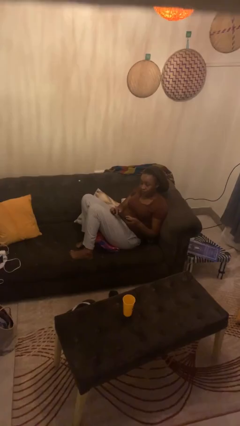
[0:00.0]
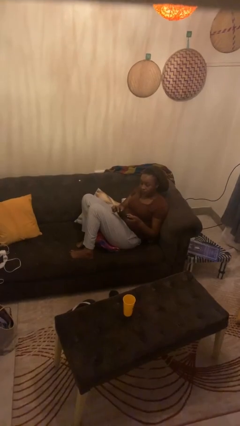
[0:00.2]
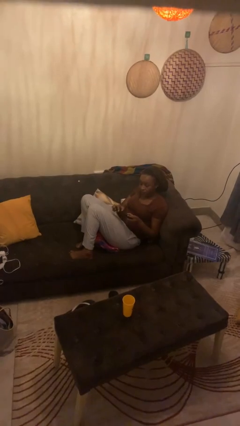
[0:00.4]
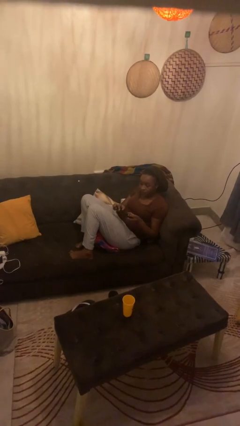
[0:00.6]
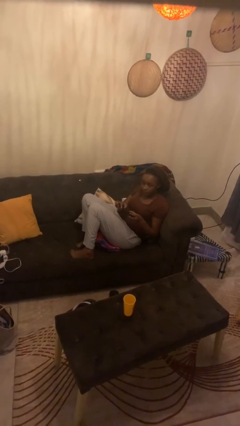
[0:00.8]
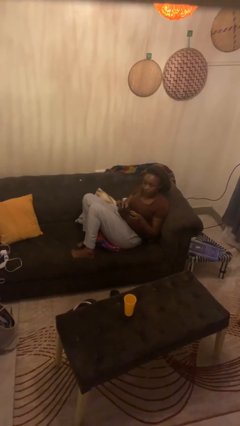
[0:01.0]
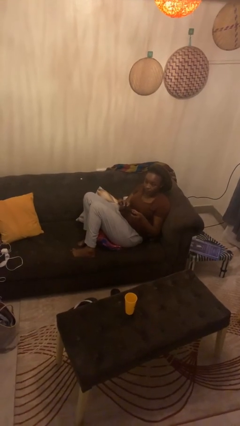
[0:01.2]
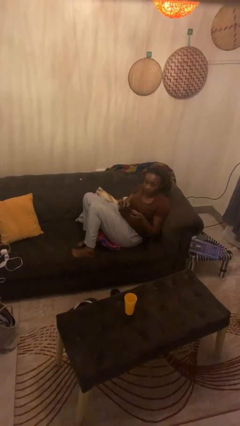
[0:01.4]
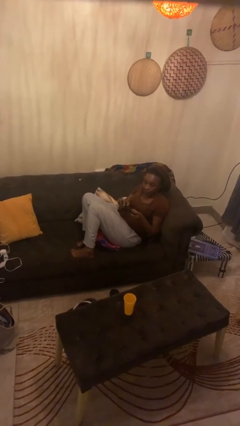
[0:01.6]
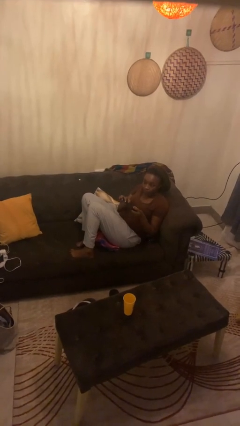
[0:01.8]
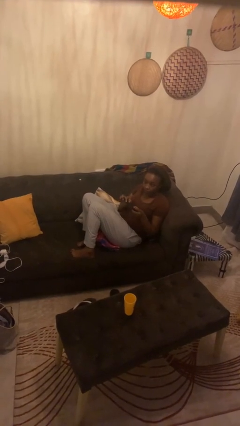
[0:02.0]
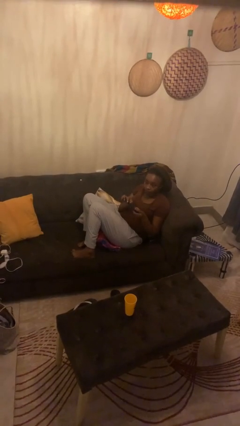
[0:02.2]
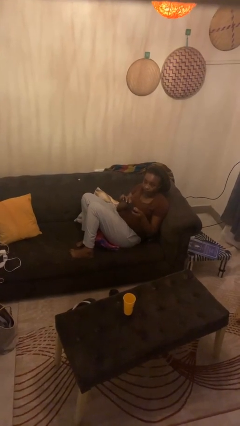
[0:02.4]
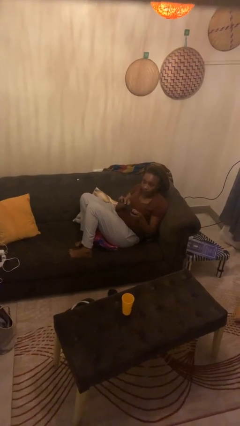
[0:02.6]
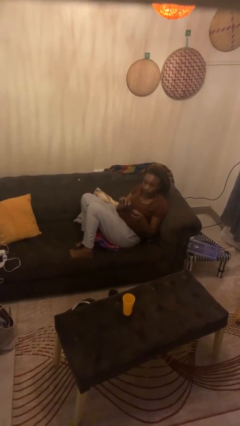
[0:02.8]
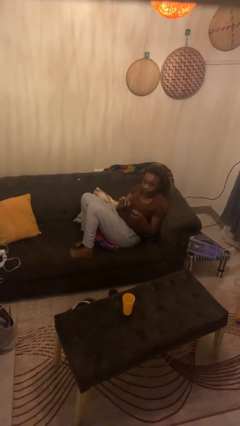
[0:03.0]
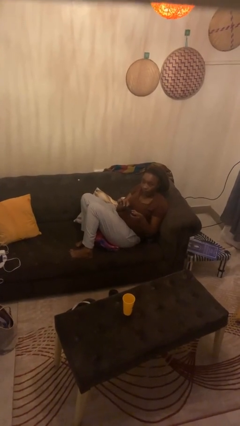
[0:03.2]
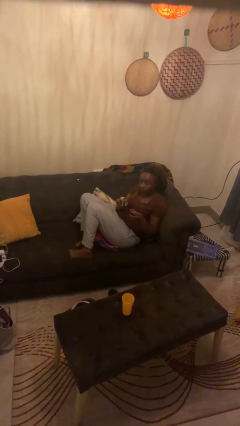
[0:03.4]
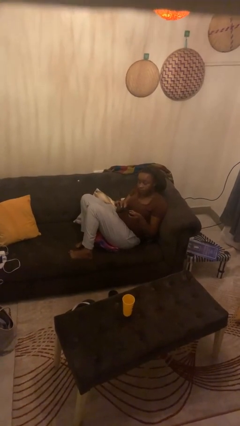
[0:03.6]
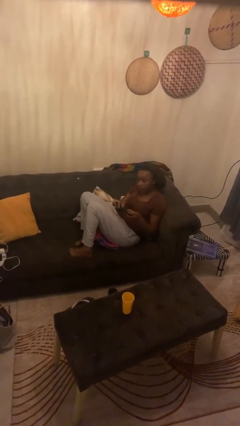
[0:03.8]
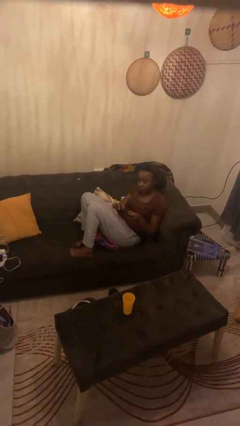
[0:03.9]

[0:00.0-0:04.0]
person interacts with handheld game

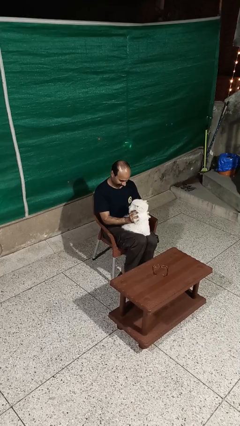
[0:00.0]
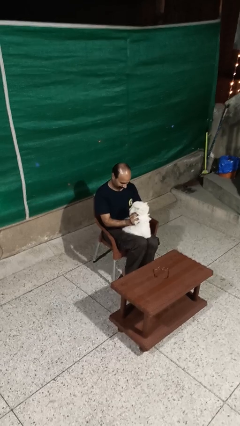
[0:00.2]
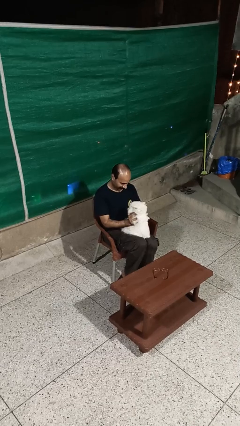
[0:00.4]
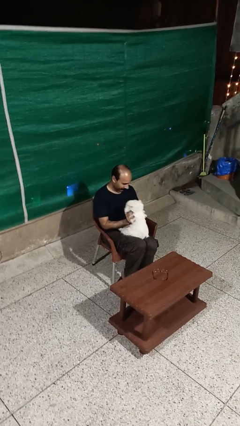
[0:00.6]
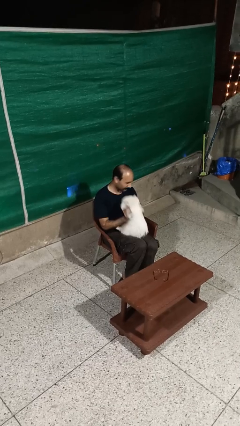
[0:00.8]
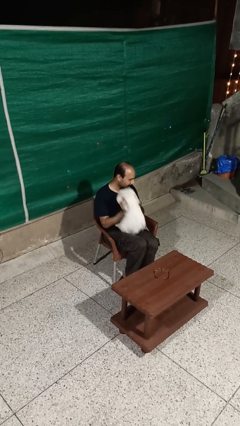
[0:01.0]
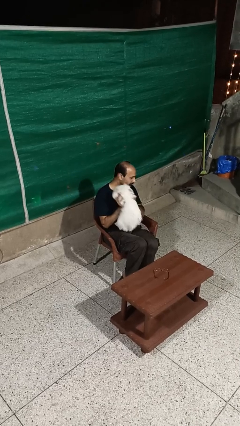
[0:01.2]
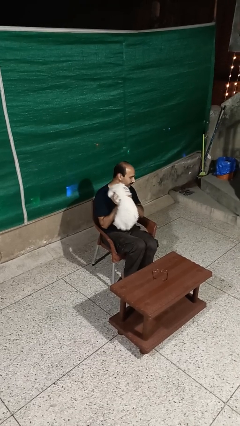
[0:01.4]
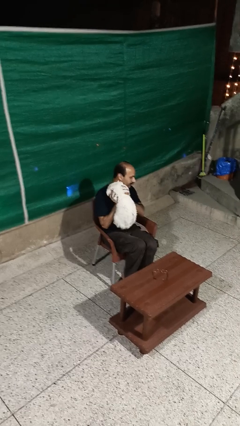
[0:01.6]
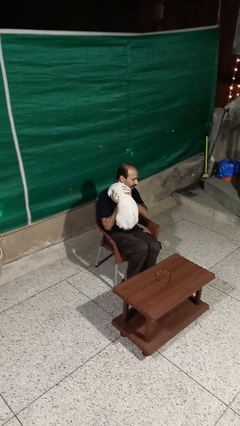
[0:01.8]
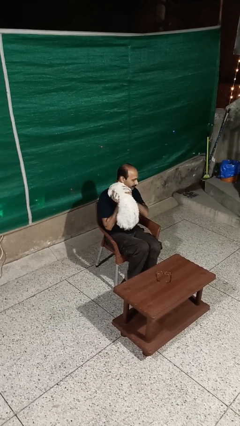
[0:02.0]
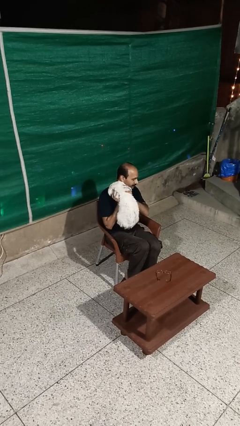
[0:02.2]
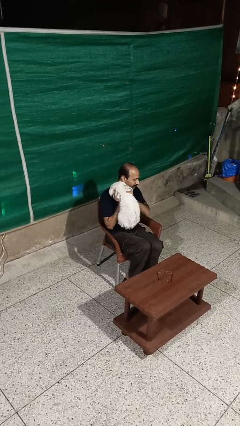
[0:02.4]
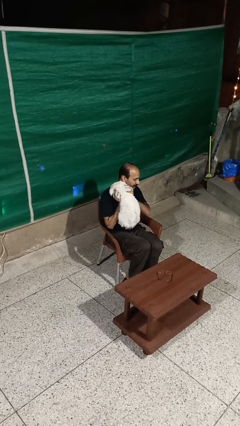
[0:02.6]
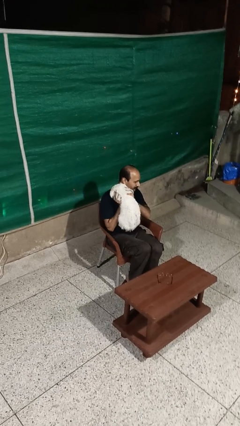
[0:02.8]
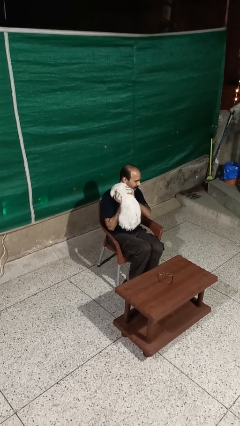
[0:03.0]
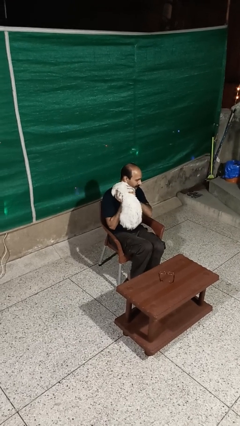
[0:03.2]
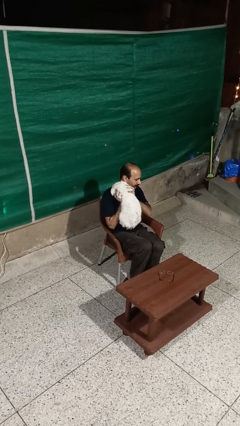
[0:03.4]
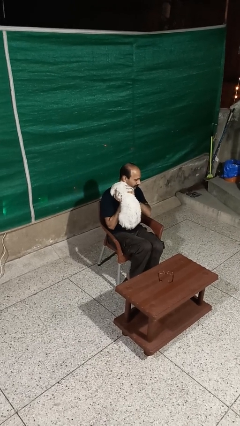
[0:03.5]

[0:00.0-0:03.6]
person hugs dog

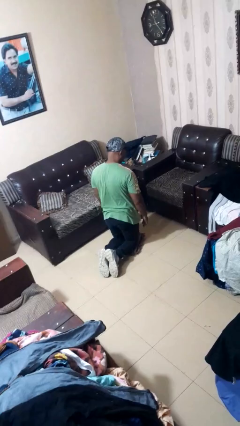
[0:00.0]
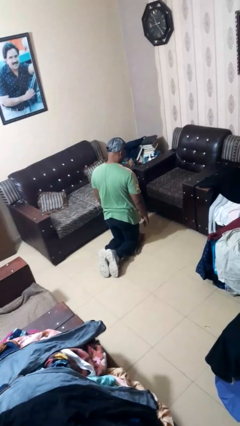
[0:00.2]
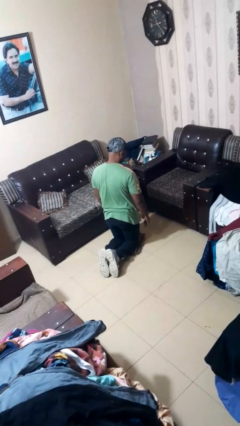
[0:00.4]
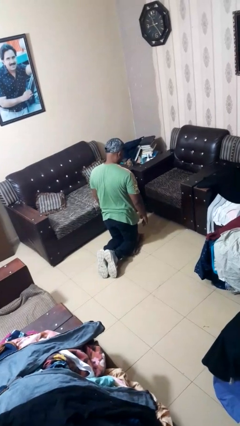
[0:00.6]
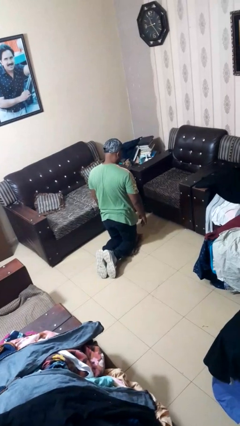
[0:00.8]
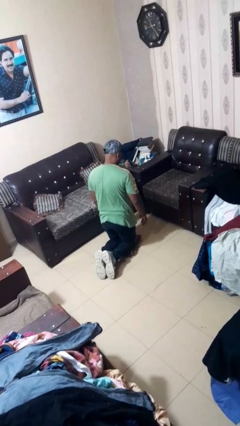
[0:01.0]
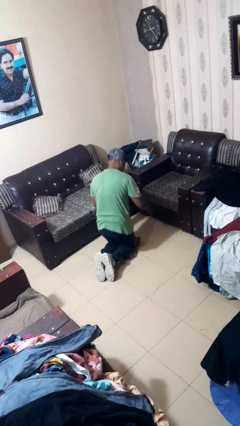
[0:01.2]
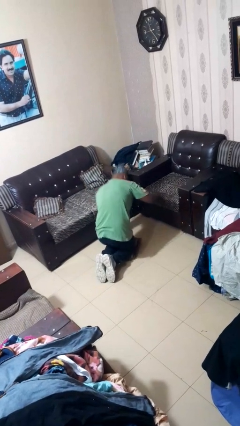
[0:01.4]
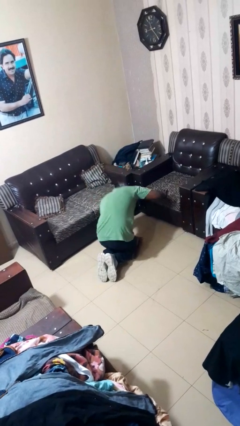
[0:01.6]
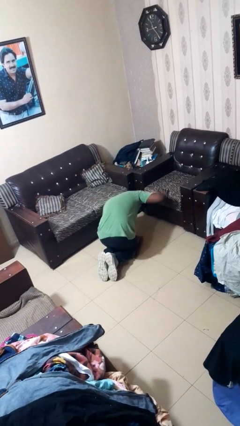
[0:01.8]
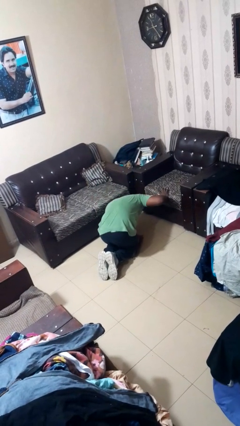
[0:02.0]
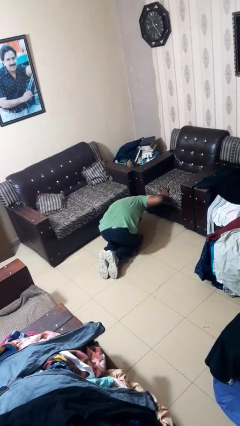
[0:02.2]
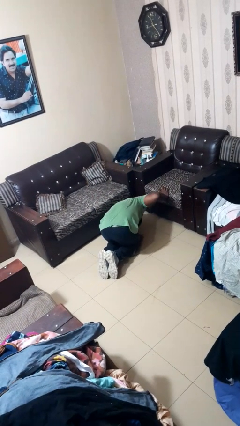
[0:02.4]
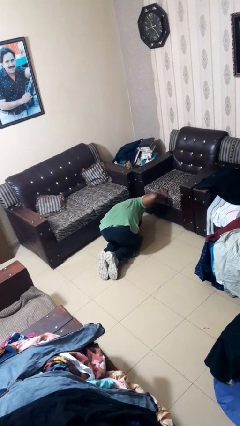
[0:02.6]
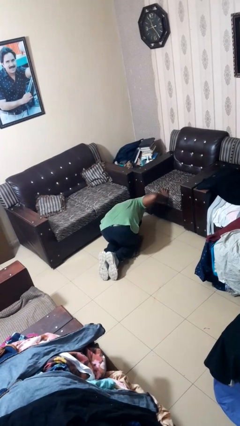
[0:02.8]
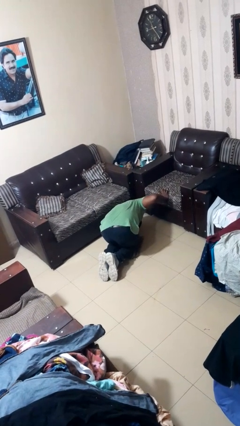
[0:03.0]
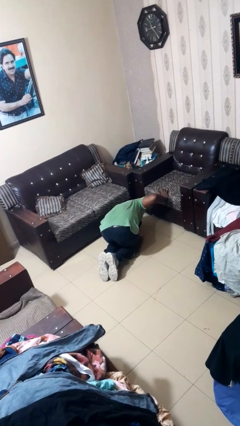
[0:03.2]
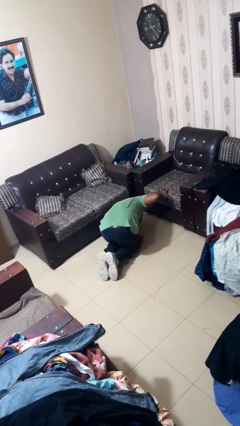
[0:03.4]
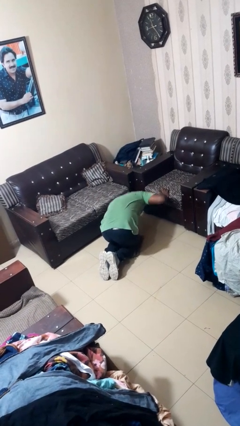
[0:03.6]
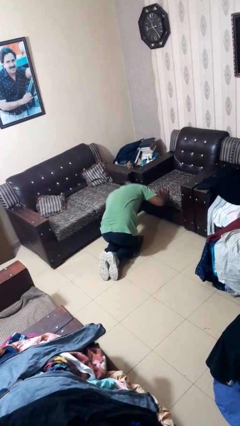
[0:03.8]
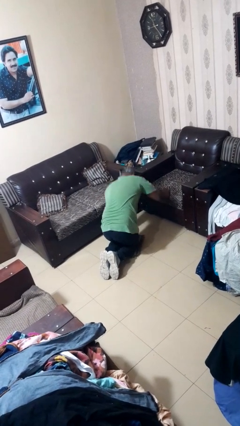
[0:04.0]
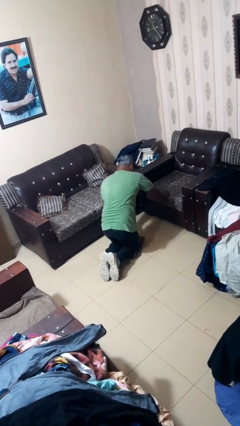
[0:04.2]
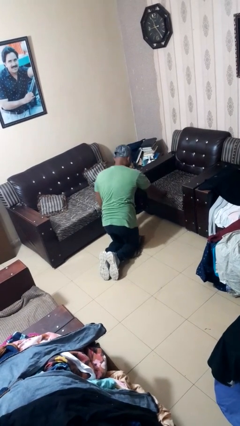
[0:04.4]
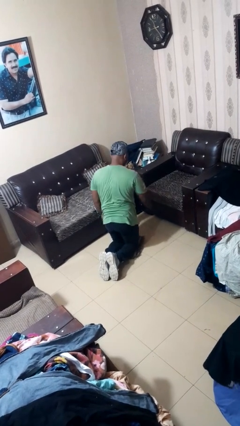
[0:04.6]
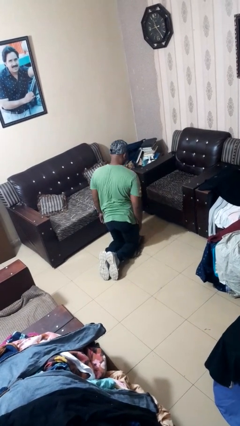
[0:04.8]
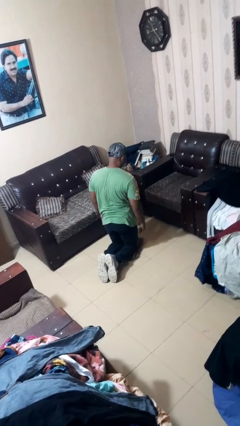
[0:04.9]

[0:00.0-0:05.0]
person searches under couch

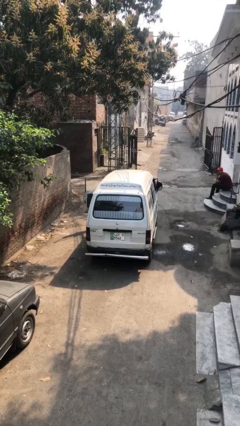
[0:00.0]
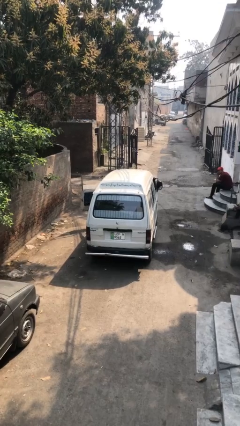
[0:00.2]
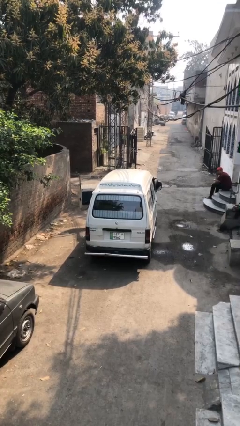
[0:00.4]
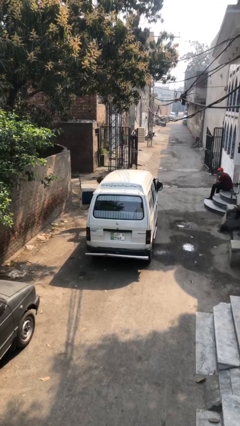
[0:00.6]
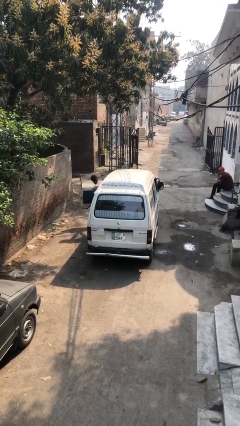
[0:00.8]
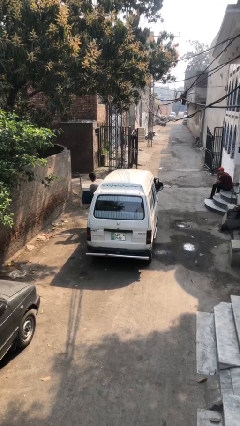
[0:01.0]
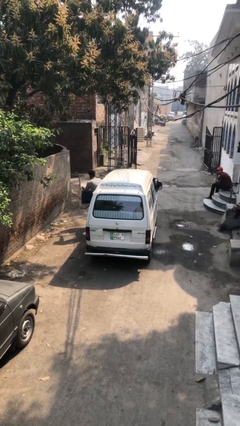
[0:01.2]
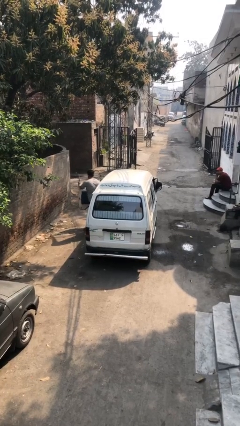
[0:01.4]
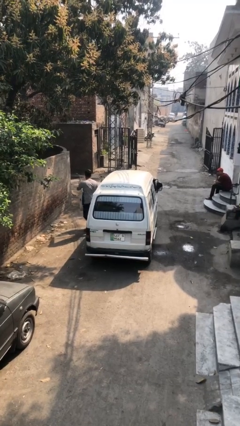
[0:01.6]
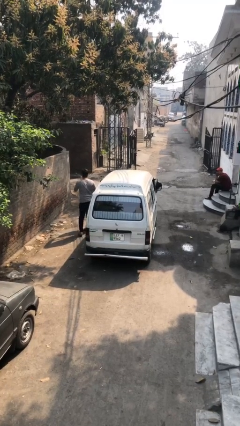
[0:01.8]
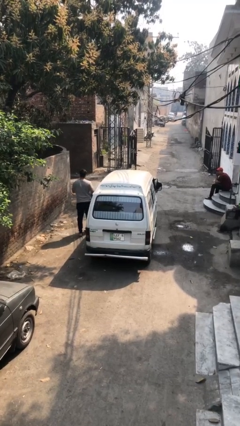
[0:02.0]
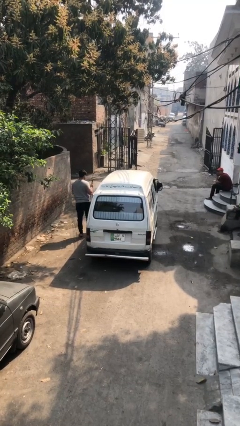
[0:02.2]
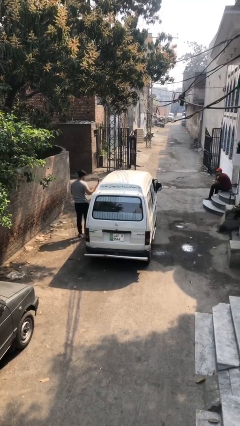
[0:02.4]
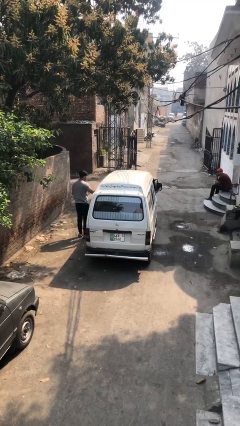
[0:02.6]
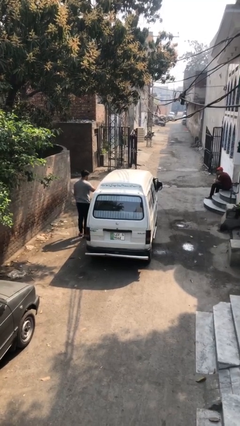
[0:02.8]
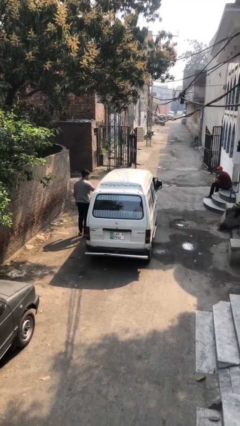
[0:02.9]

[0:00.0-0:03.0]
car drops off person

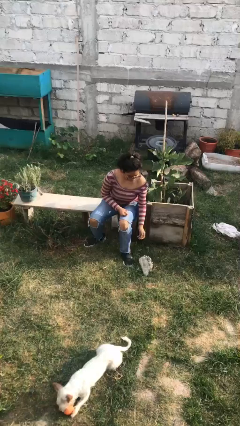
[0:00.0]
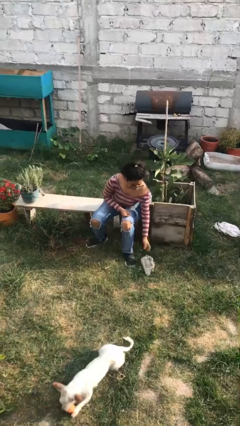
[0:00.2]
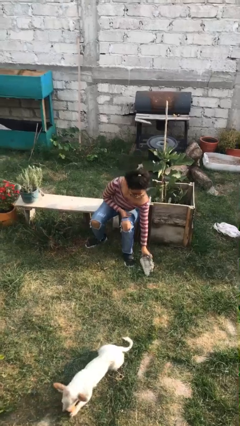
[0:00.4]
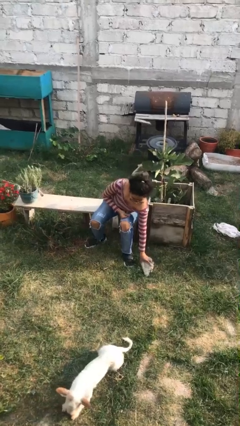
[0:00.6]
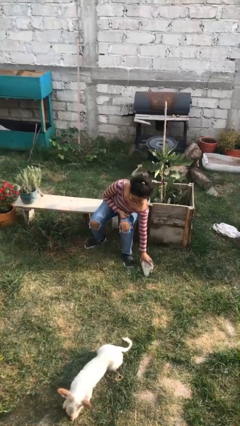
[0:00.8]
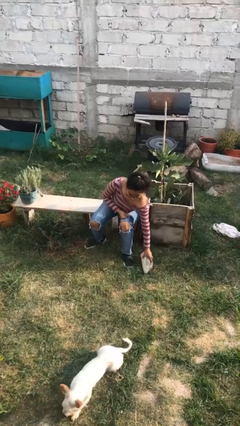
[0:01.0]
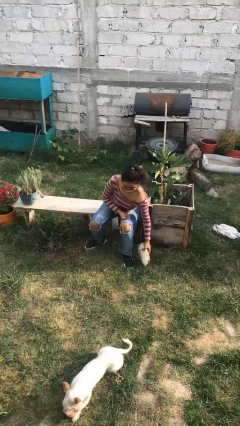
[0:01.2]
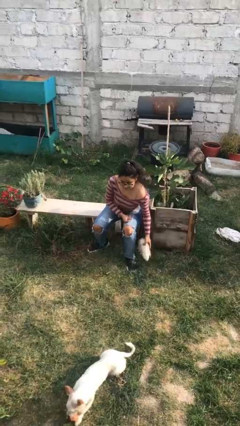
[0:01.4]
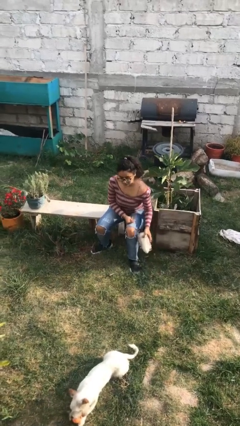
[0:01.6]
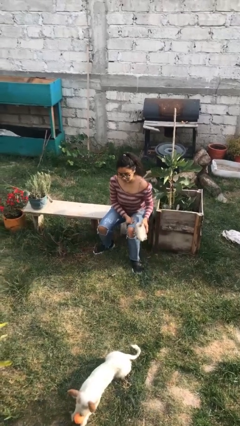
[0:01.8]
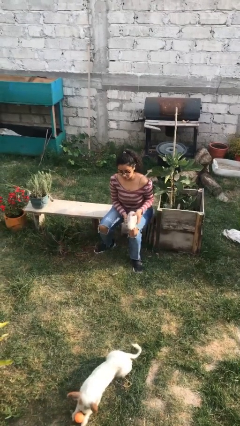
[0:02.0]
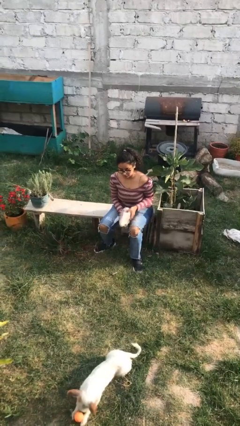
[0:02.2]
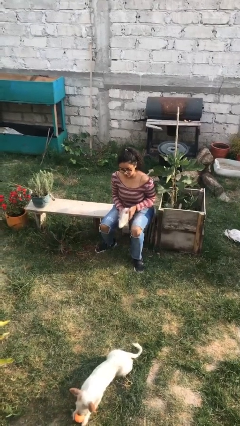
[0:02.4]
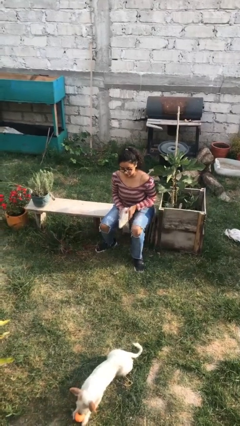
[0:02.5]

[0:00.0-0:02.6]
person picks up object from floor
